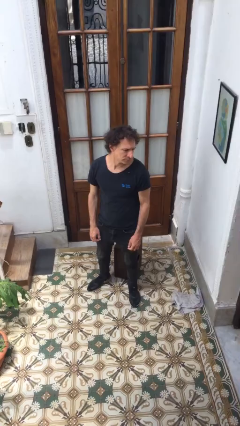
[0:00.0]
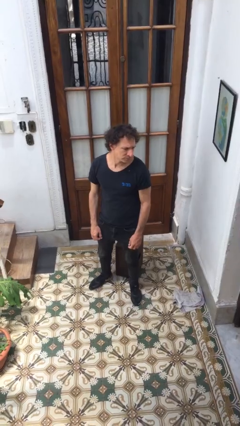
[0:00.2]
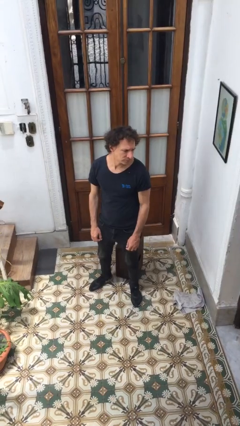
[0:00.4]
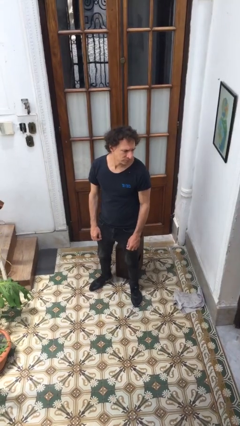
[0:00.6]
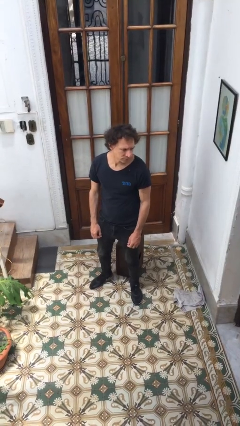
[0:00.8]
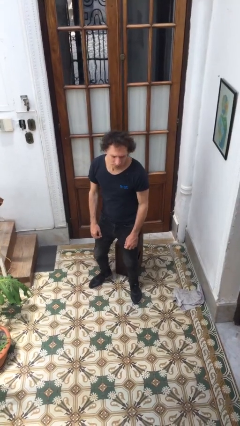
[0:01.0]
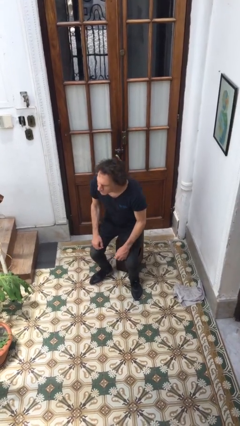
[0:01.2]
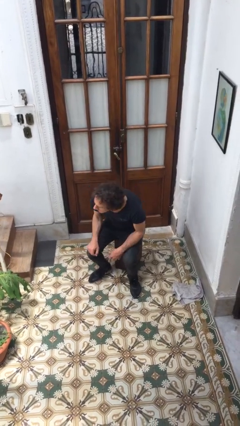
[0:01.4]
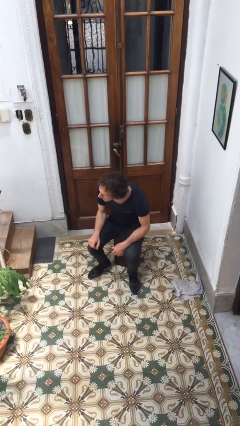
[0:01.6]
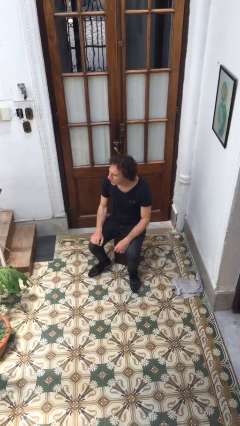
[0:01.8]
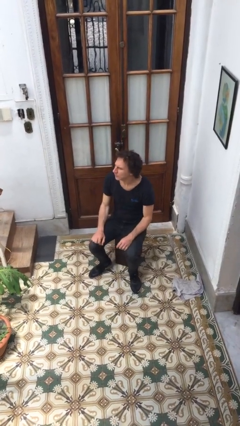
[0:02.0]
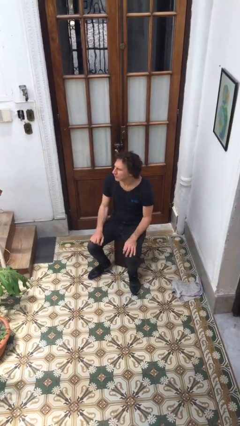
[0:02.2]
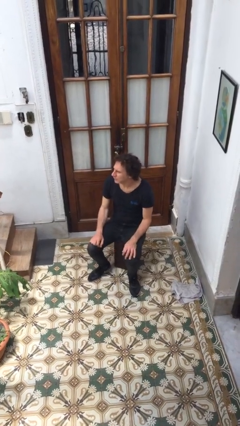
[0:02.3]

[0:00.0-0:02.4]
person sits down

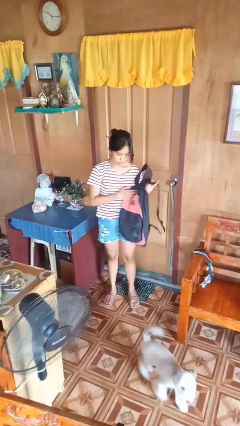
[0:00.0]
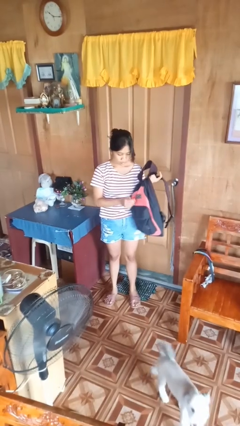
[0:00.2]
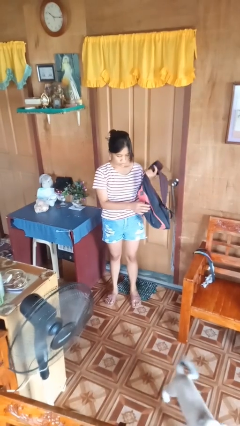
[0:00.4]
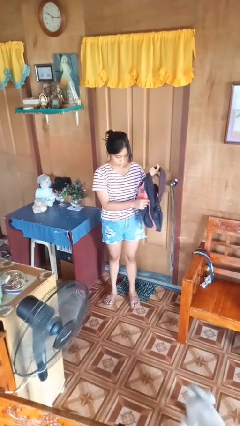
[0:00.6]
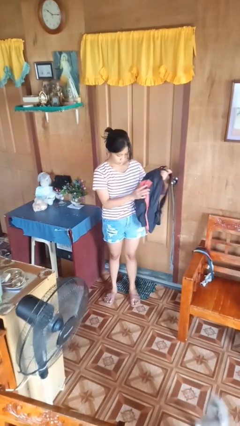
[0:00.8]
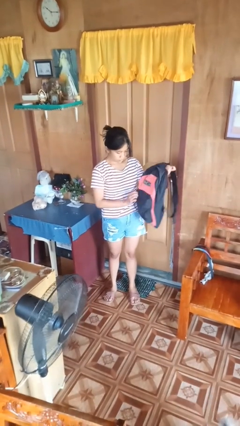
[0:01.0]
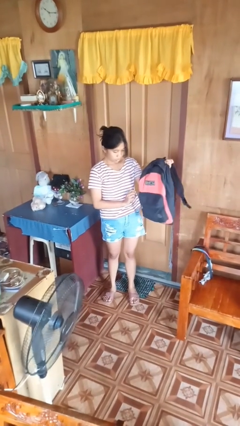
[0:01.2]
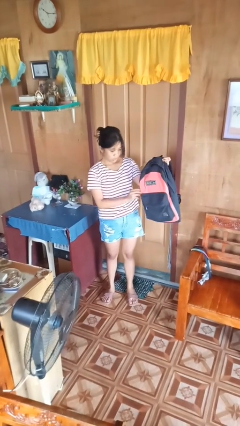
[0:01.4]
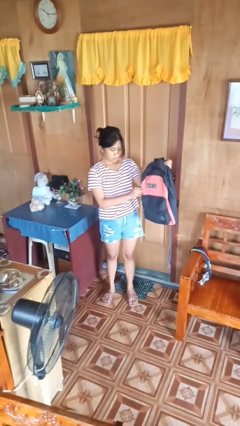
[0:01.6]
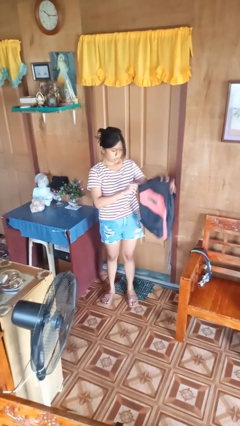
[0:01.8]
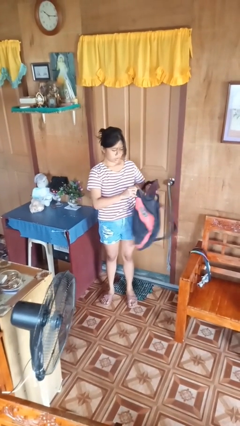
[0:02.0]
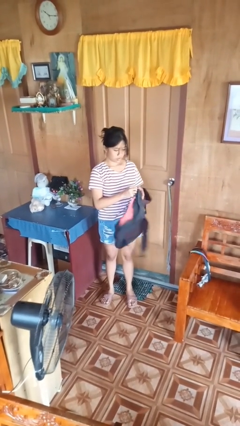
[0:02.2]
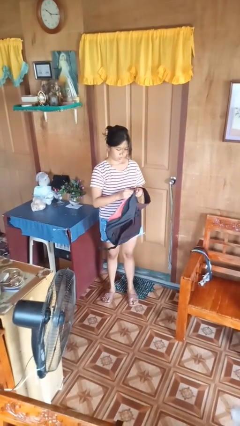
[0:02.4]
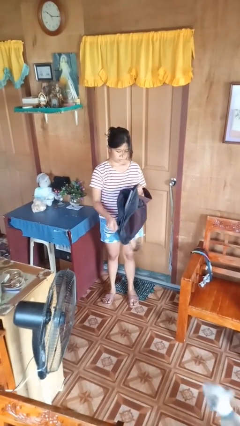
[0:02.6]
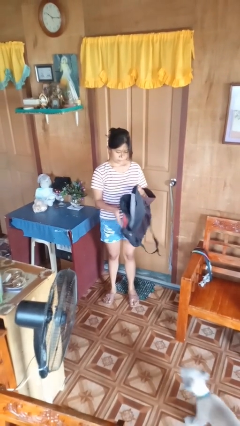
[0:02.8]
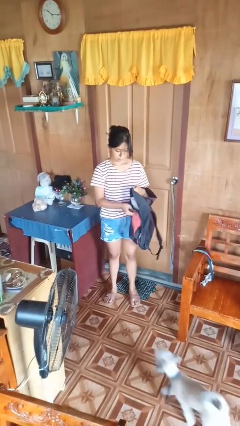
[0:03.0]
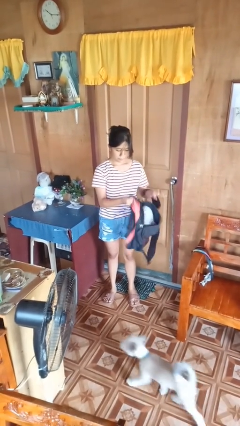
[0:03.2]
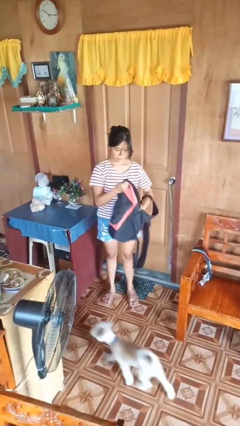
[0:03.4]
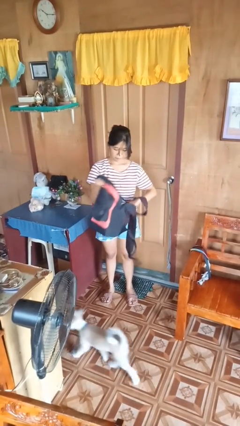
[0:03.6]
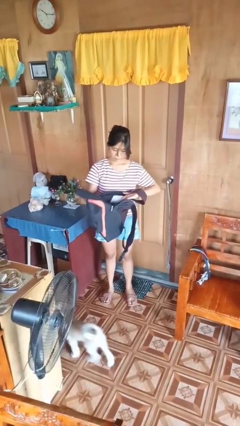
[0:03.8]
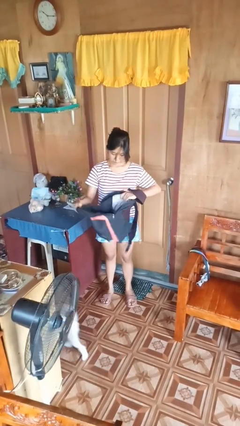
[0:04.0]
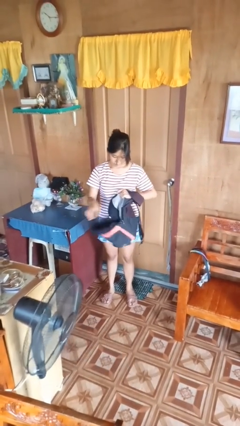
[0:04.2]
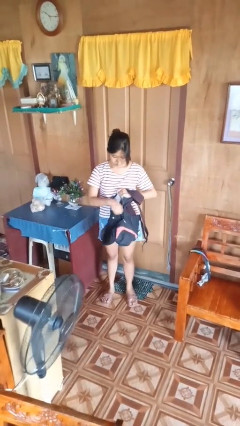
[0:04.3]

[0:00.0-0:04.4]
person searches in backpack

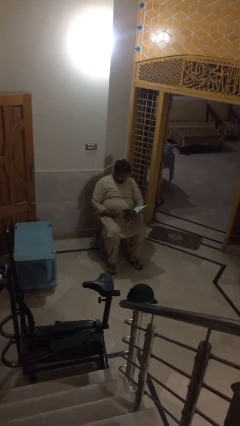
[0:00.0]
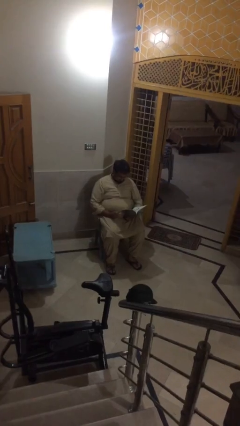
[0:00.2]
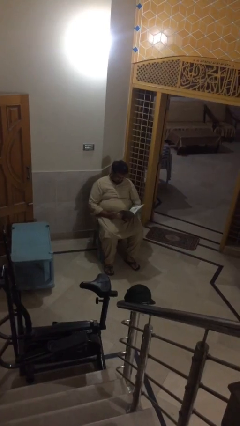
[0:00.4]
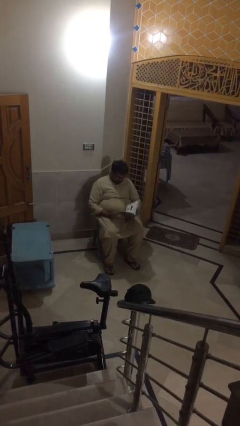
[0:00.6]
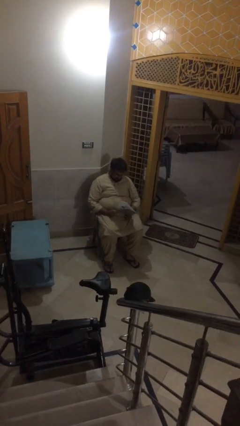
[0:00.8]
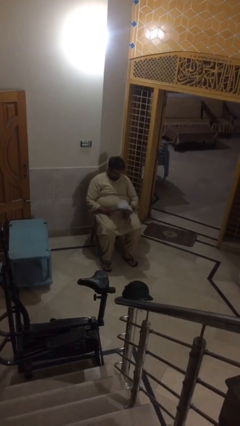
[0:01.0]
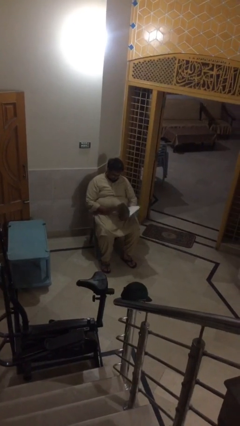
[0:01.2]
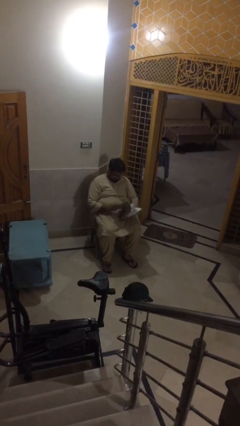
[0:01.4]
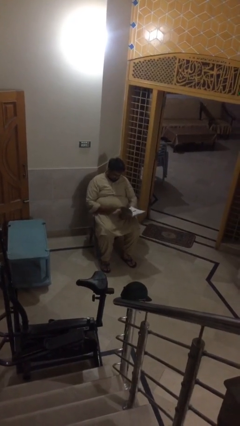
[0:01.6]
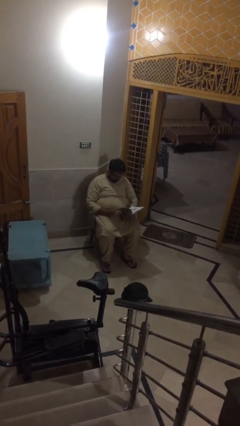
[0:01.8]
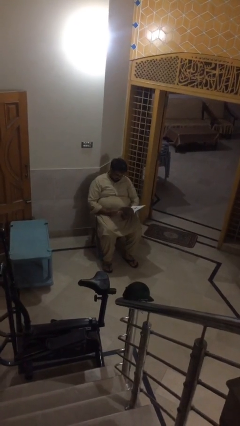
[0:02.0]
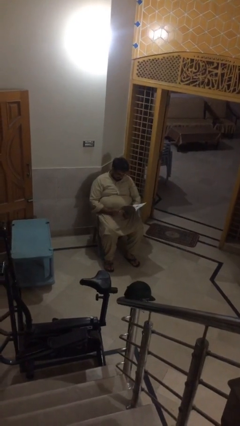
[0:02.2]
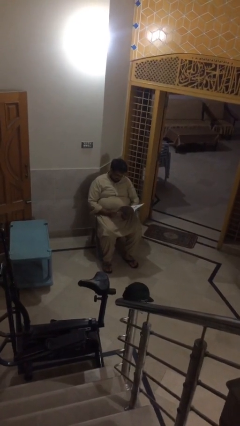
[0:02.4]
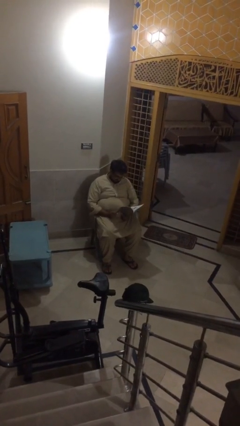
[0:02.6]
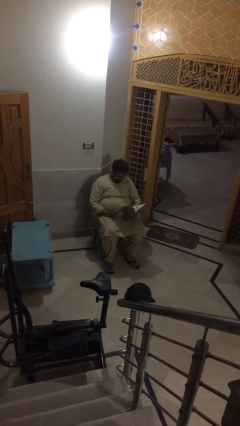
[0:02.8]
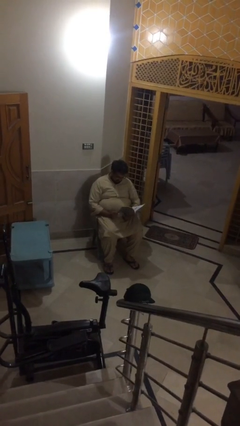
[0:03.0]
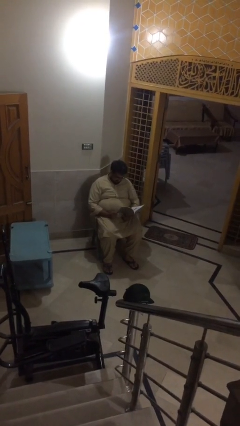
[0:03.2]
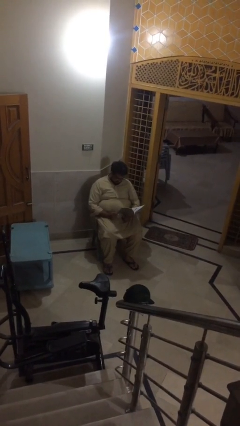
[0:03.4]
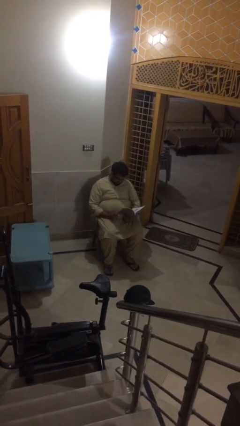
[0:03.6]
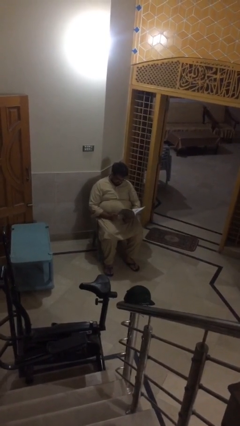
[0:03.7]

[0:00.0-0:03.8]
person reads document

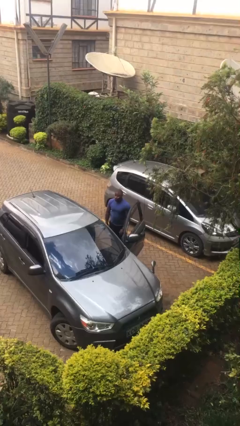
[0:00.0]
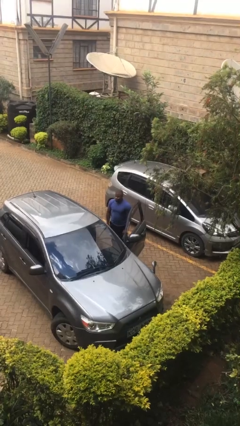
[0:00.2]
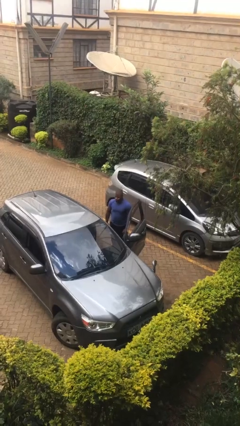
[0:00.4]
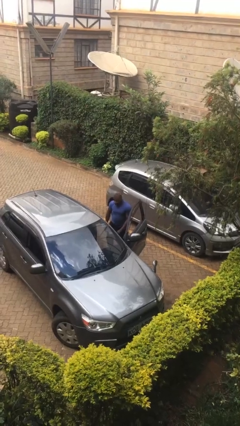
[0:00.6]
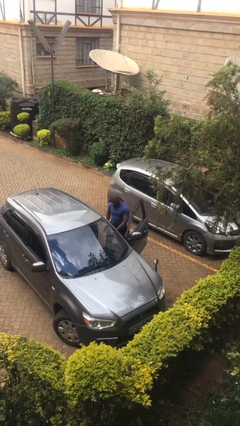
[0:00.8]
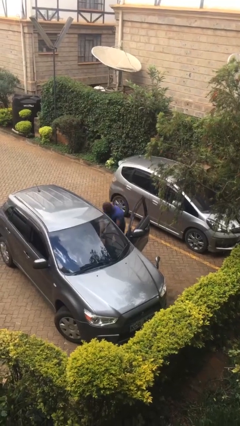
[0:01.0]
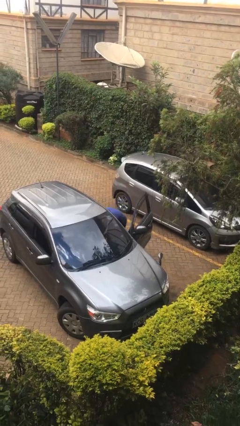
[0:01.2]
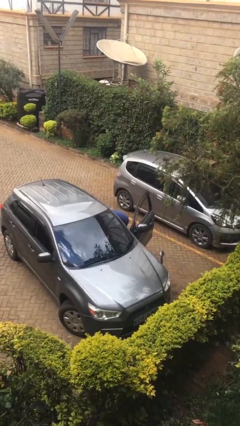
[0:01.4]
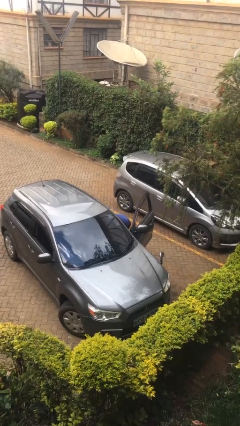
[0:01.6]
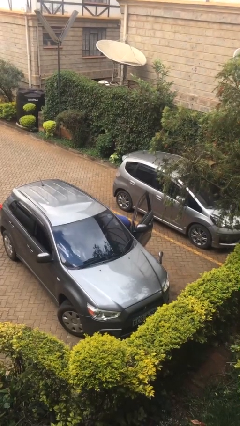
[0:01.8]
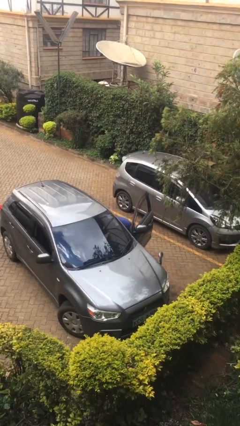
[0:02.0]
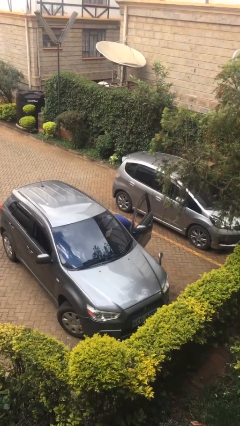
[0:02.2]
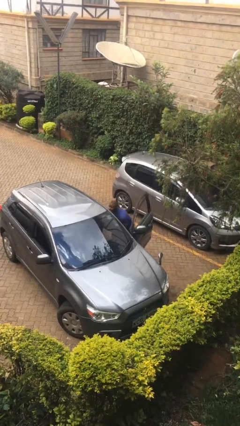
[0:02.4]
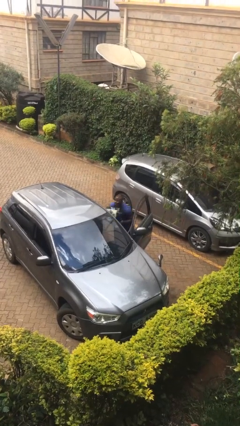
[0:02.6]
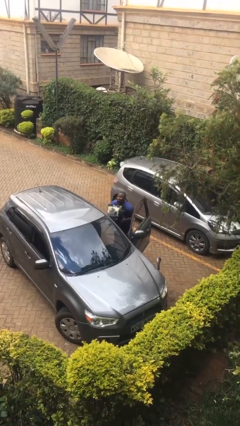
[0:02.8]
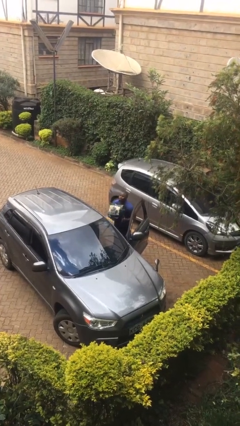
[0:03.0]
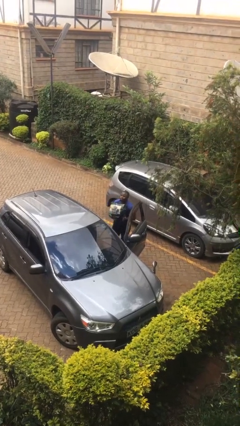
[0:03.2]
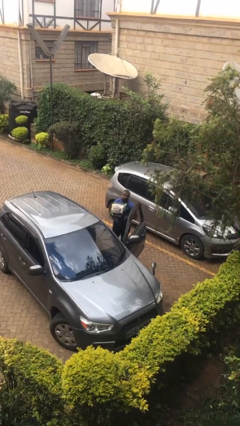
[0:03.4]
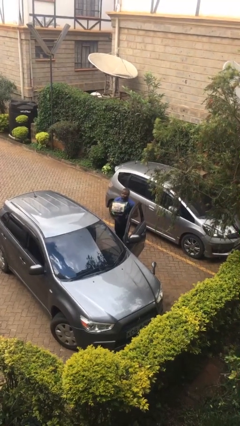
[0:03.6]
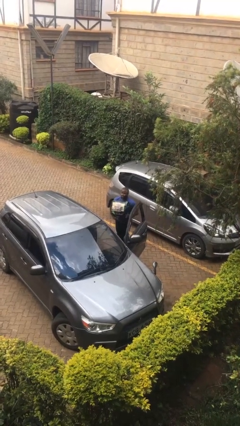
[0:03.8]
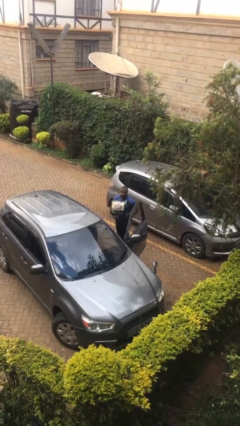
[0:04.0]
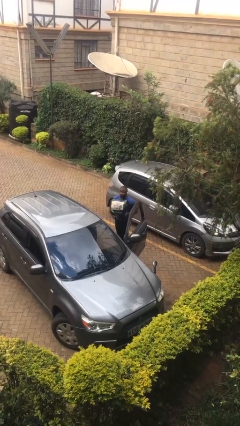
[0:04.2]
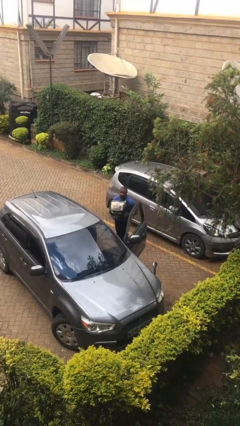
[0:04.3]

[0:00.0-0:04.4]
person unloads car

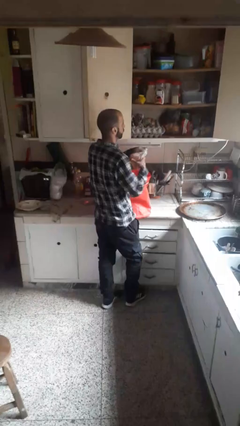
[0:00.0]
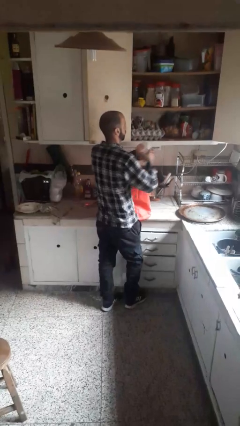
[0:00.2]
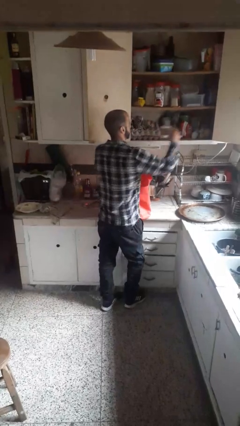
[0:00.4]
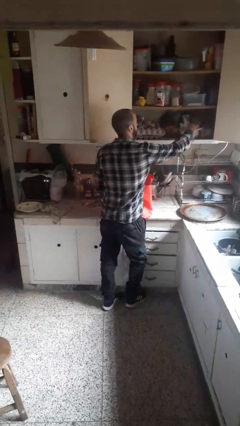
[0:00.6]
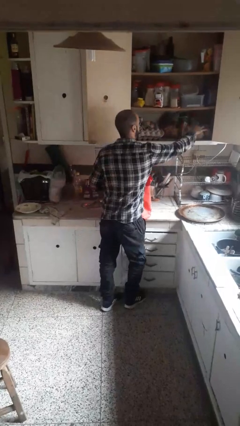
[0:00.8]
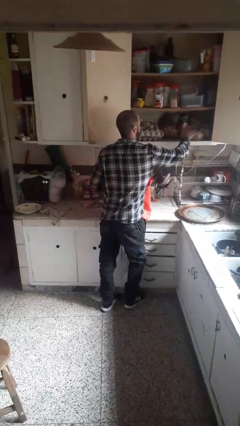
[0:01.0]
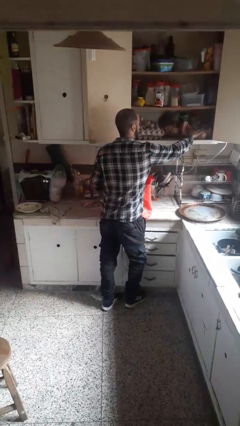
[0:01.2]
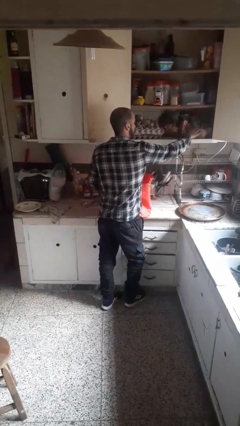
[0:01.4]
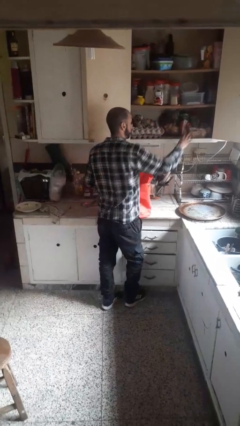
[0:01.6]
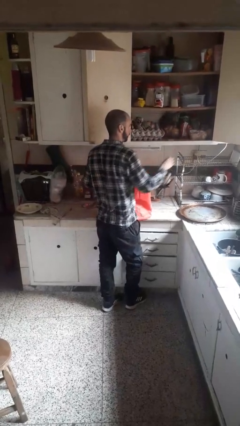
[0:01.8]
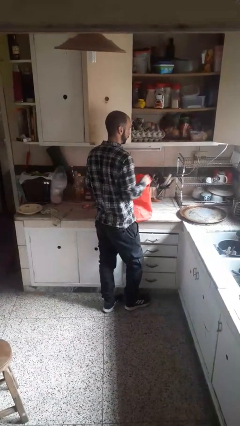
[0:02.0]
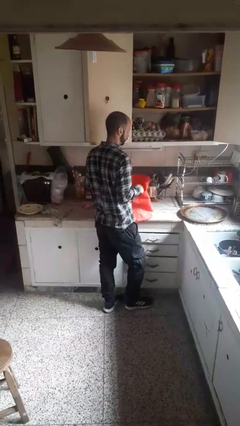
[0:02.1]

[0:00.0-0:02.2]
person loads groceries into cabinet

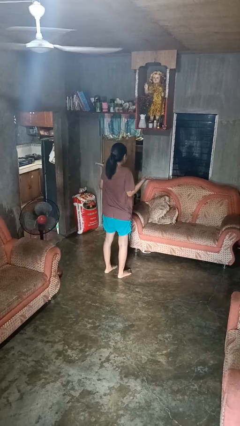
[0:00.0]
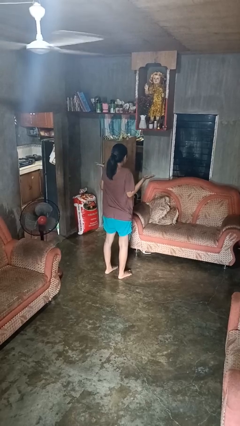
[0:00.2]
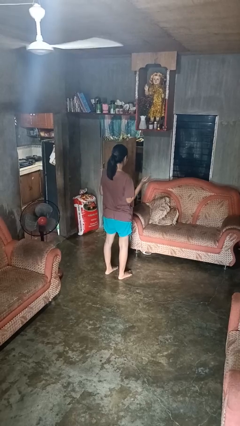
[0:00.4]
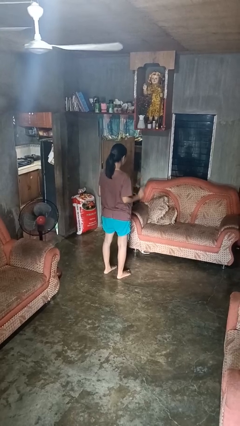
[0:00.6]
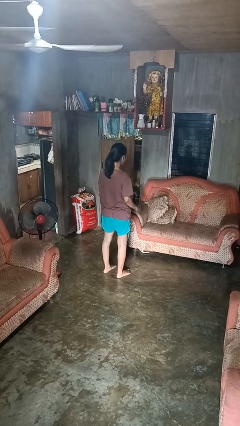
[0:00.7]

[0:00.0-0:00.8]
person shrugs
